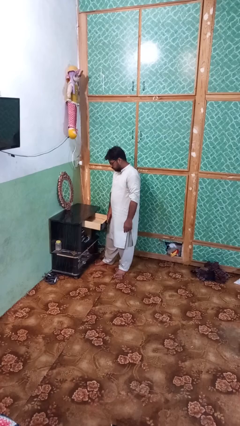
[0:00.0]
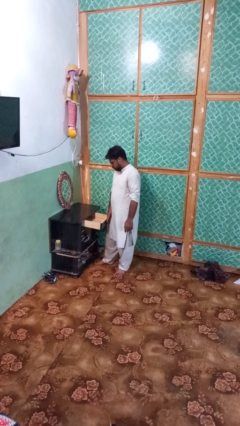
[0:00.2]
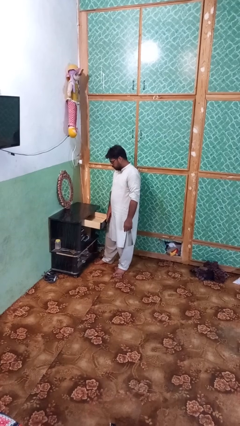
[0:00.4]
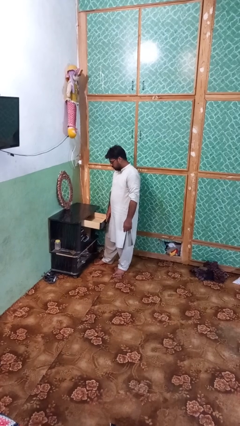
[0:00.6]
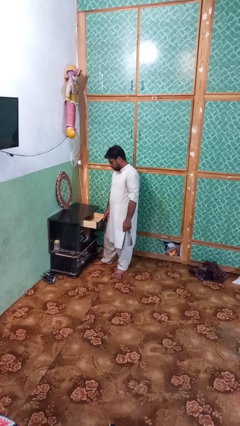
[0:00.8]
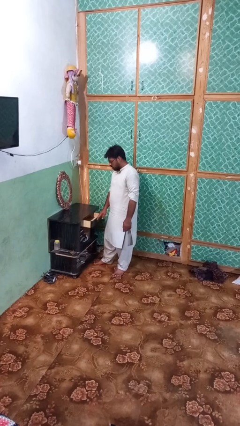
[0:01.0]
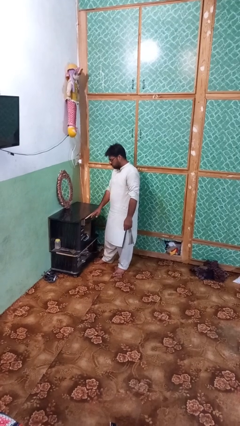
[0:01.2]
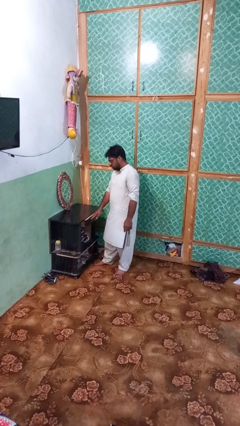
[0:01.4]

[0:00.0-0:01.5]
person closes dresser drawer

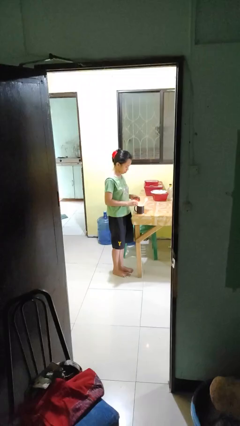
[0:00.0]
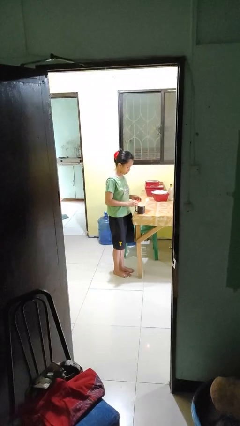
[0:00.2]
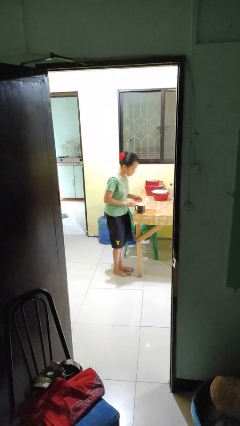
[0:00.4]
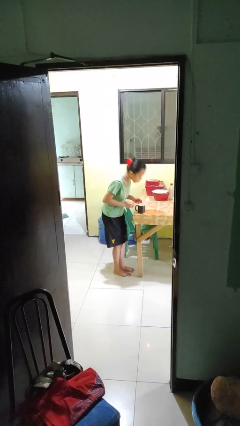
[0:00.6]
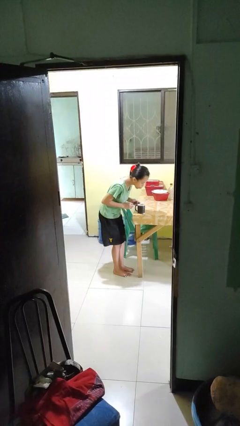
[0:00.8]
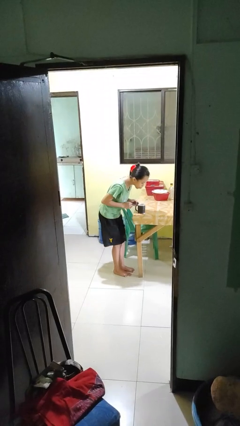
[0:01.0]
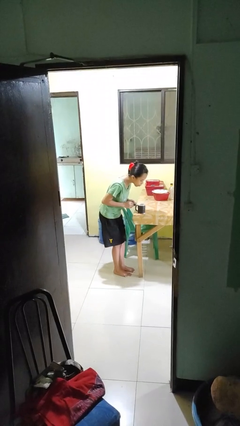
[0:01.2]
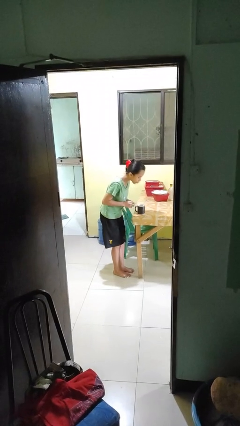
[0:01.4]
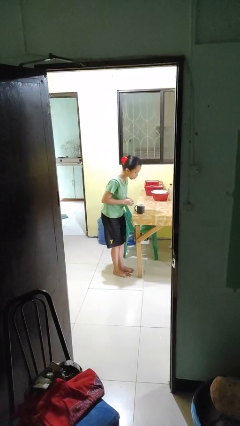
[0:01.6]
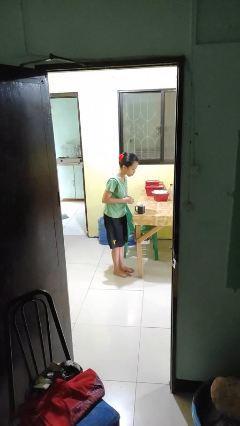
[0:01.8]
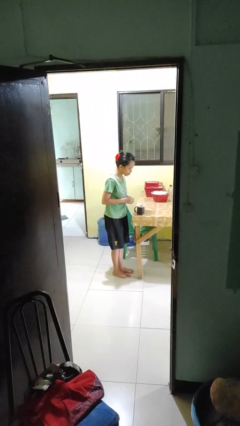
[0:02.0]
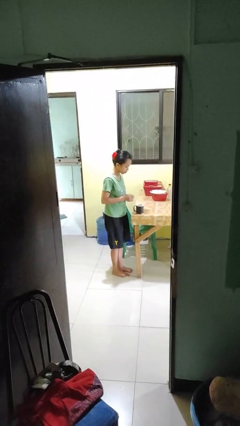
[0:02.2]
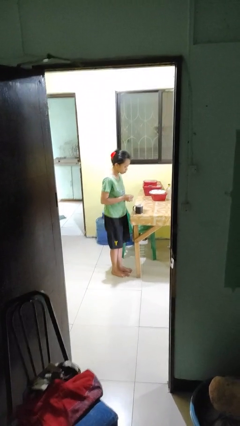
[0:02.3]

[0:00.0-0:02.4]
person extinguishes candle

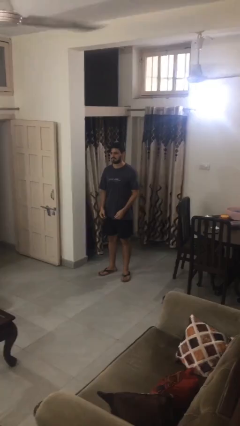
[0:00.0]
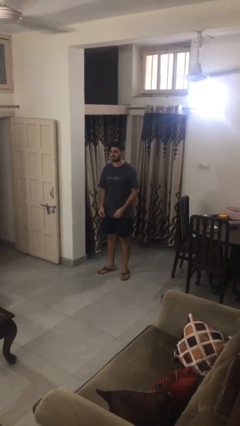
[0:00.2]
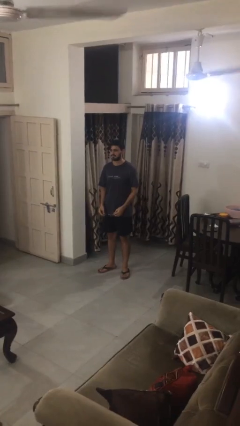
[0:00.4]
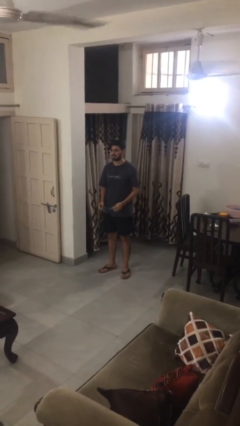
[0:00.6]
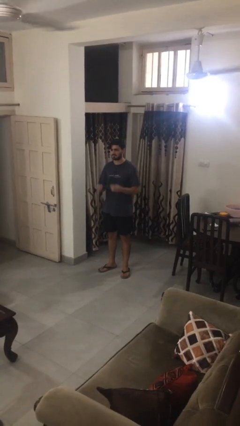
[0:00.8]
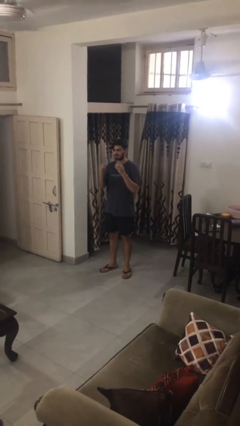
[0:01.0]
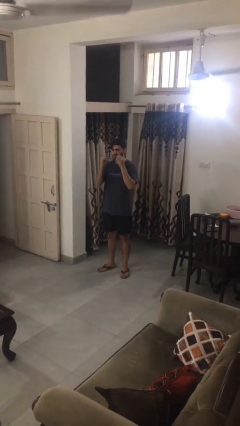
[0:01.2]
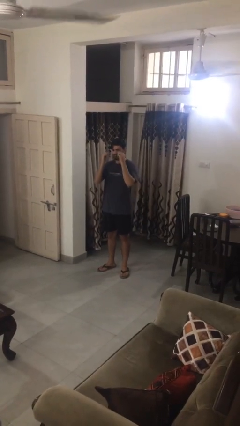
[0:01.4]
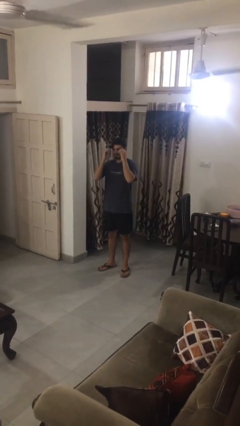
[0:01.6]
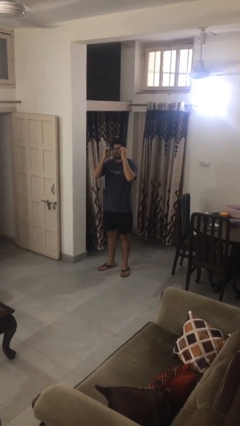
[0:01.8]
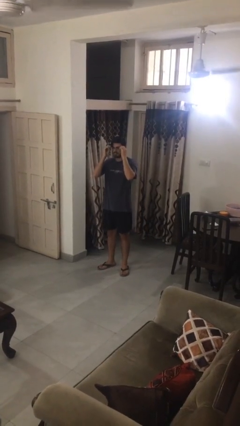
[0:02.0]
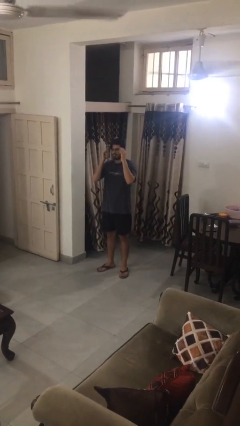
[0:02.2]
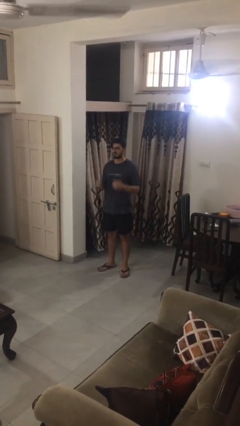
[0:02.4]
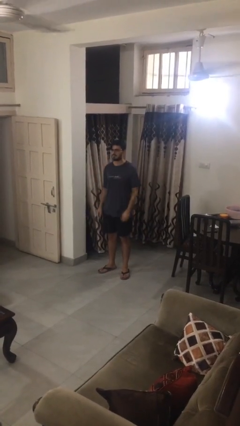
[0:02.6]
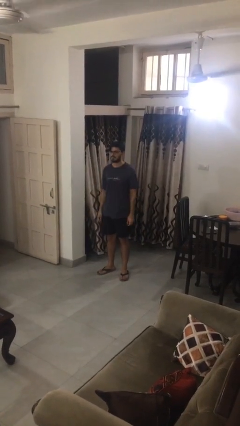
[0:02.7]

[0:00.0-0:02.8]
person puts on glasses

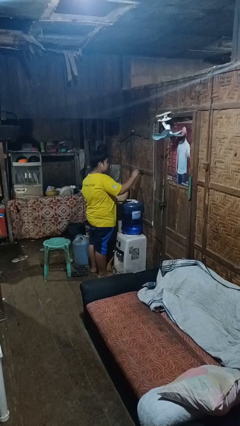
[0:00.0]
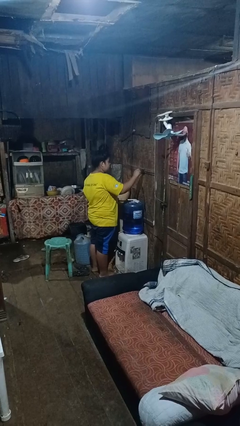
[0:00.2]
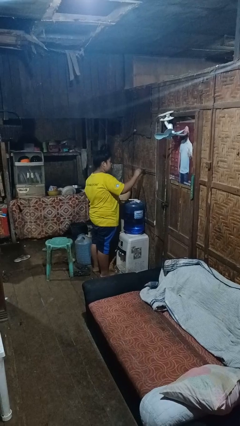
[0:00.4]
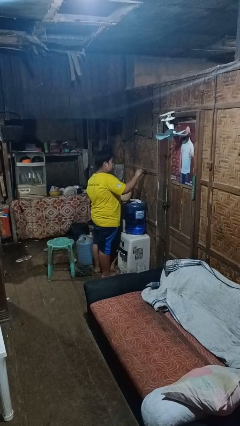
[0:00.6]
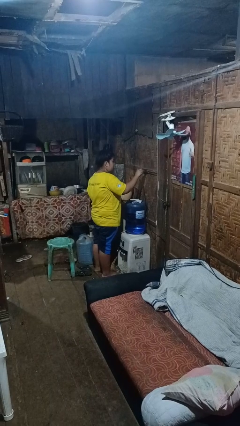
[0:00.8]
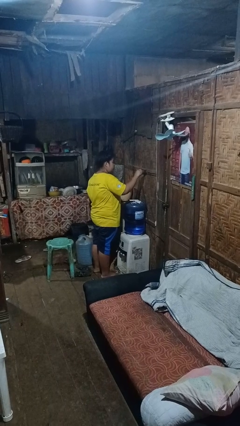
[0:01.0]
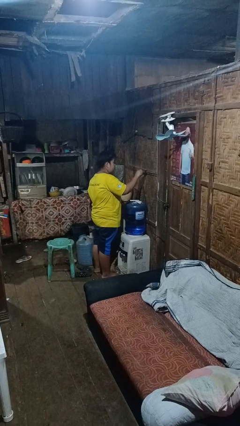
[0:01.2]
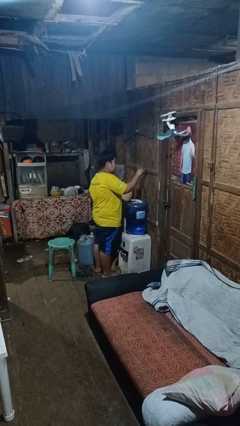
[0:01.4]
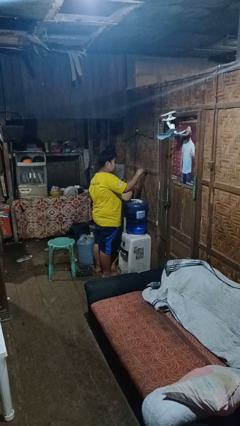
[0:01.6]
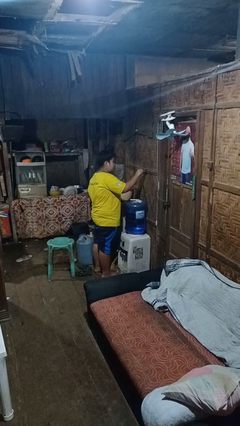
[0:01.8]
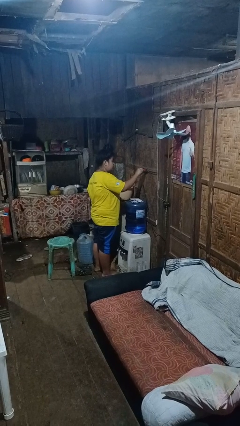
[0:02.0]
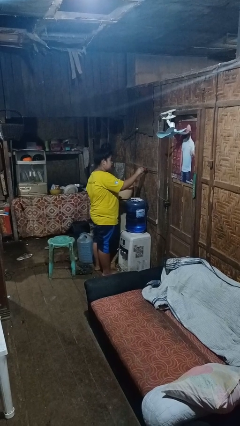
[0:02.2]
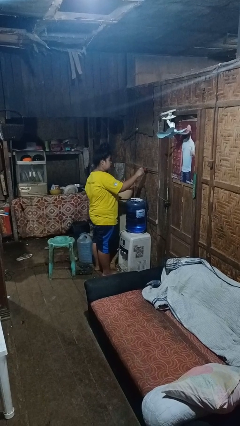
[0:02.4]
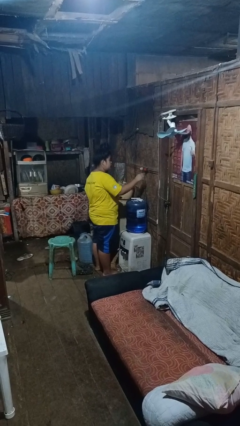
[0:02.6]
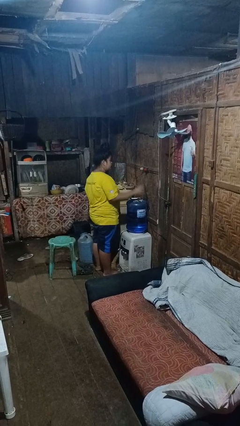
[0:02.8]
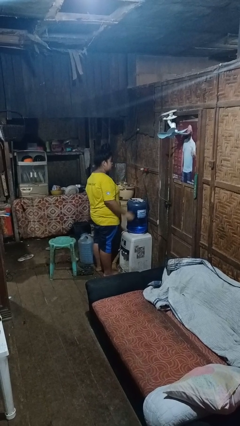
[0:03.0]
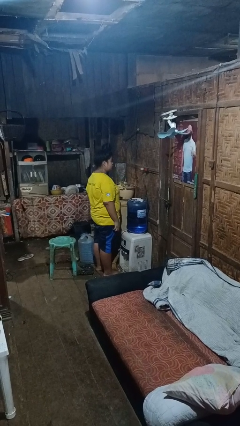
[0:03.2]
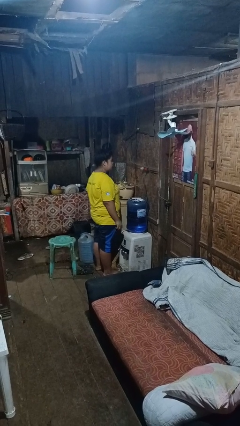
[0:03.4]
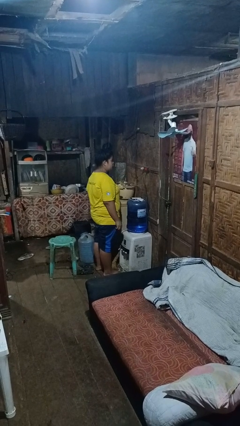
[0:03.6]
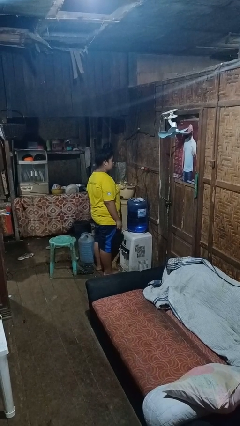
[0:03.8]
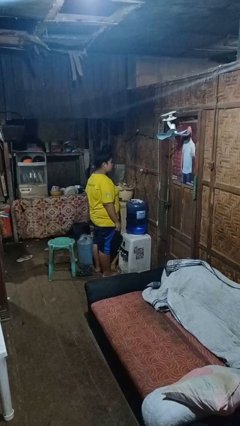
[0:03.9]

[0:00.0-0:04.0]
person plugs into electrical socket

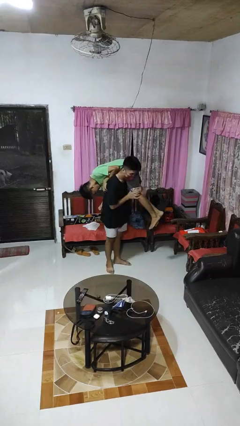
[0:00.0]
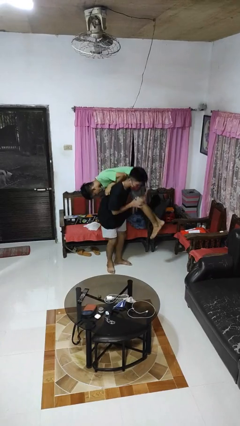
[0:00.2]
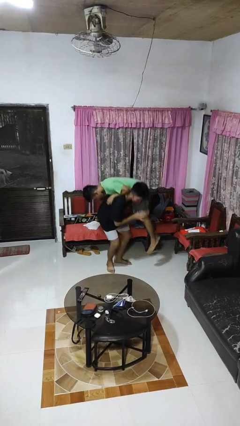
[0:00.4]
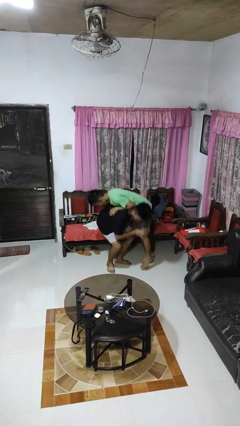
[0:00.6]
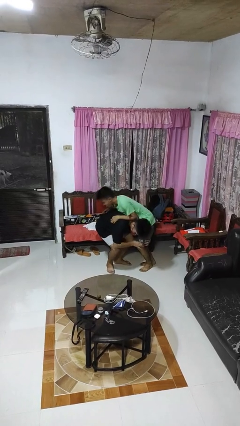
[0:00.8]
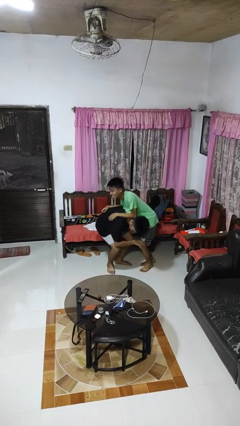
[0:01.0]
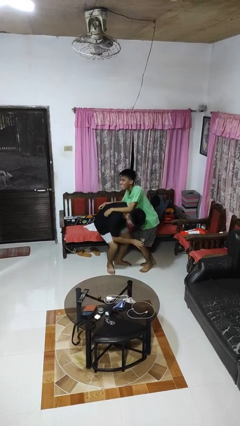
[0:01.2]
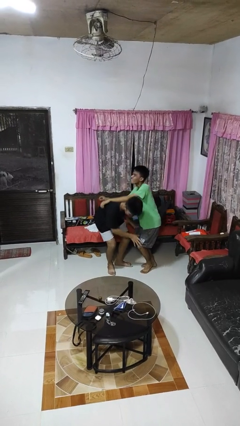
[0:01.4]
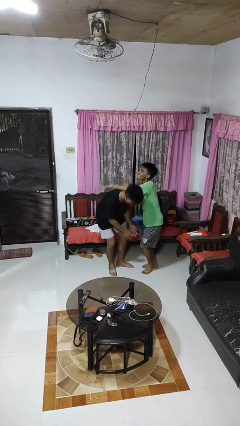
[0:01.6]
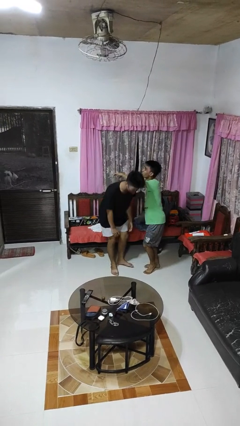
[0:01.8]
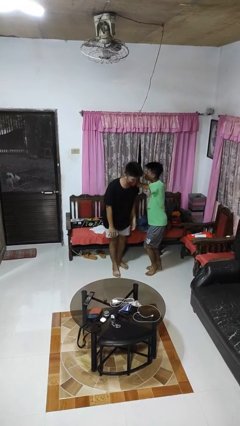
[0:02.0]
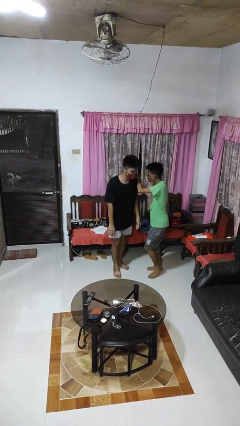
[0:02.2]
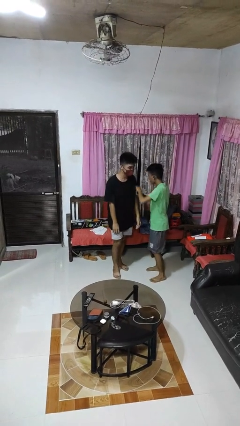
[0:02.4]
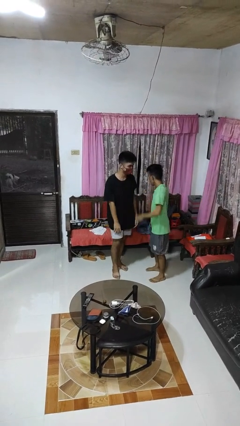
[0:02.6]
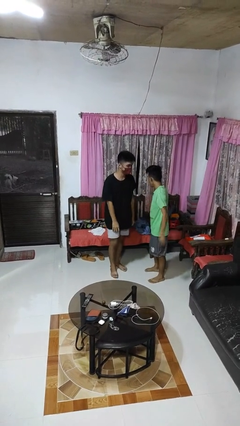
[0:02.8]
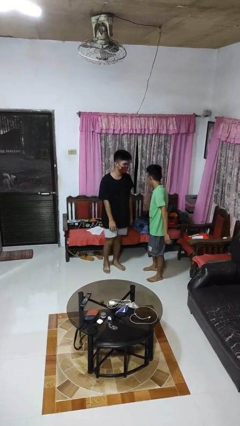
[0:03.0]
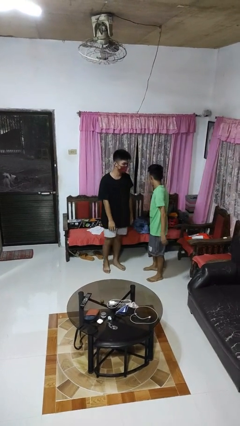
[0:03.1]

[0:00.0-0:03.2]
person puts down person

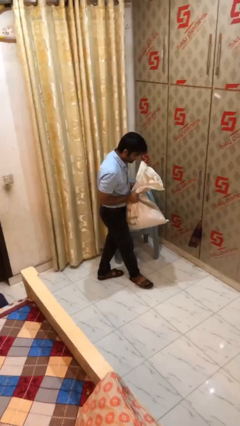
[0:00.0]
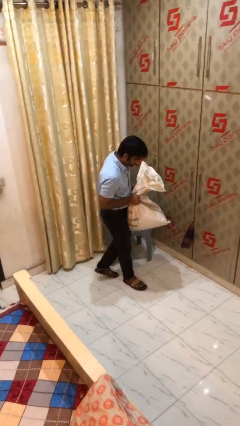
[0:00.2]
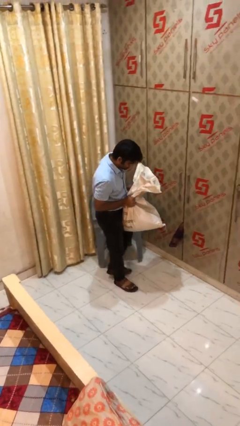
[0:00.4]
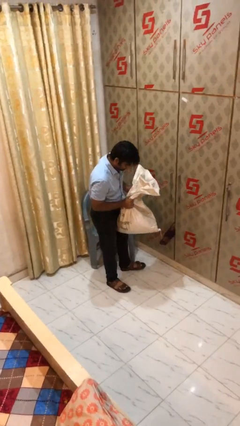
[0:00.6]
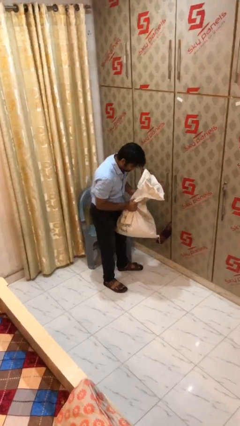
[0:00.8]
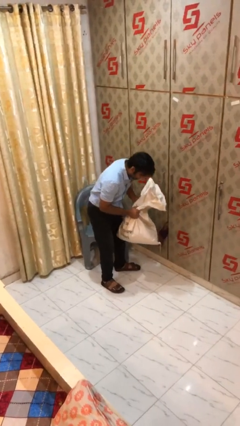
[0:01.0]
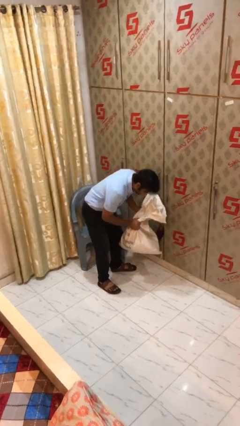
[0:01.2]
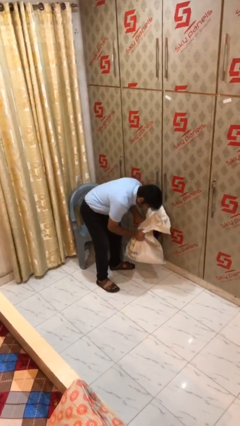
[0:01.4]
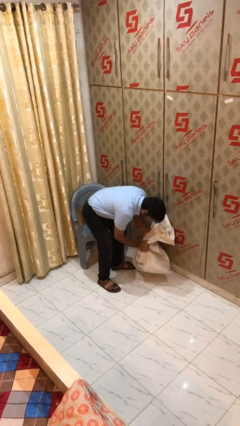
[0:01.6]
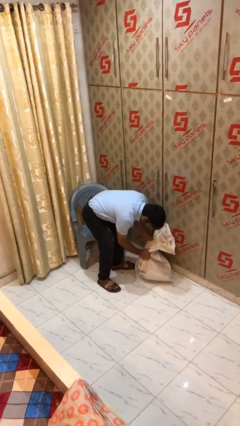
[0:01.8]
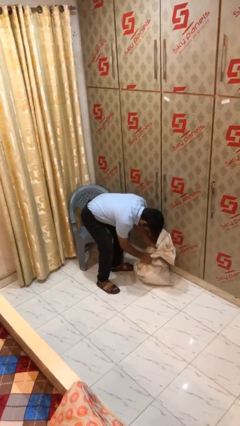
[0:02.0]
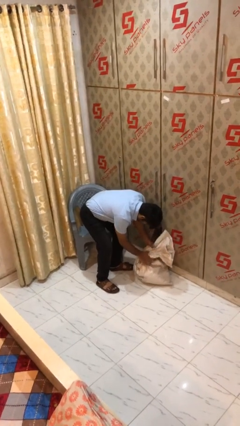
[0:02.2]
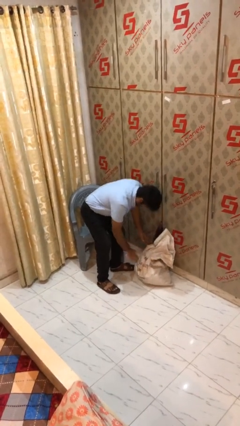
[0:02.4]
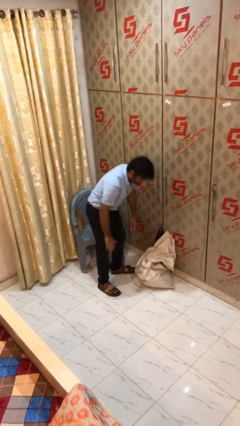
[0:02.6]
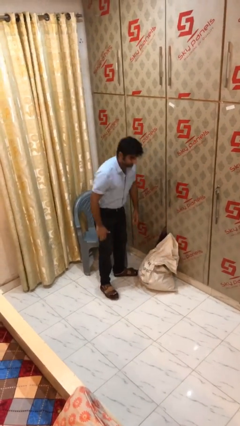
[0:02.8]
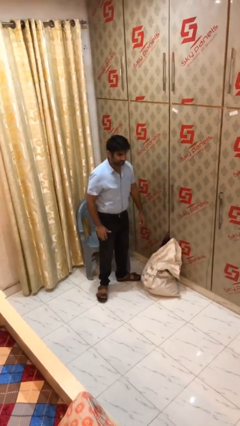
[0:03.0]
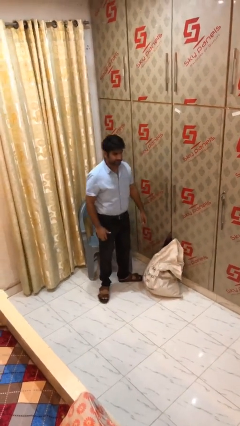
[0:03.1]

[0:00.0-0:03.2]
person puts down object on floor

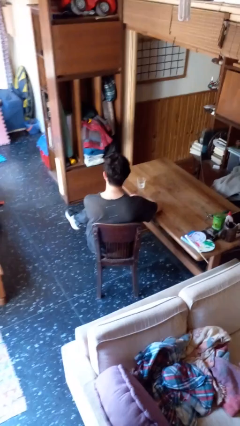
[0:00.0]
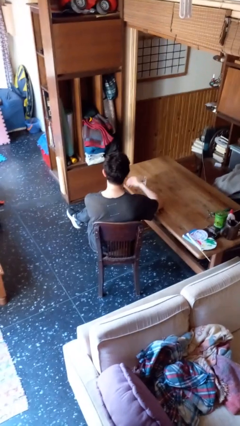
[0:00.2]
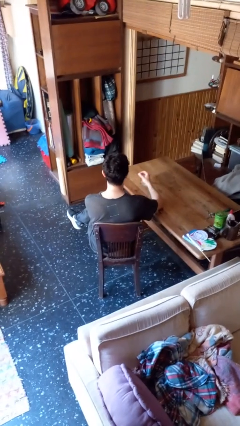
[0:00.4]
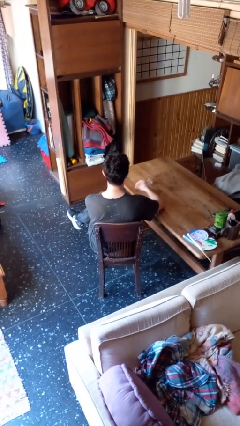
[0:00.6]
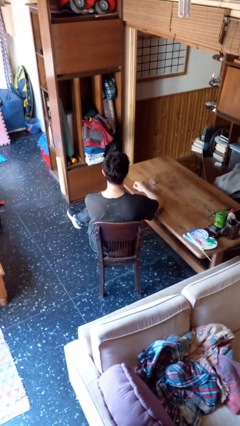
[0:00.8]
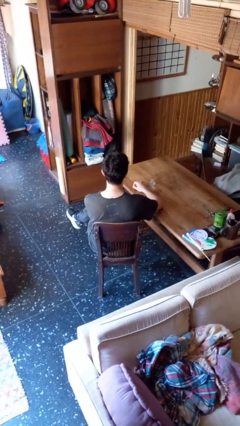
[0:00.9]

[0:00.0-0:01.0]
person knocks over glass
